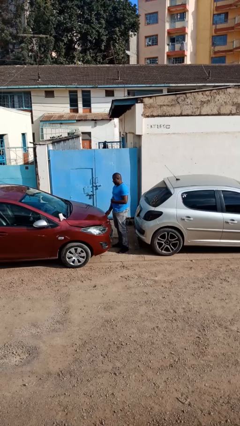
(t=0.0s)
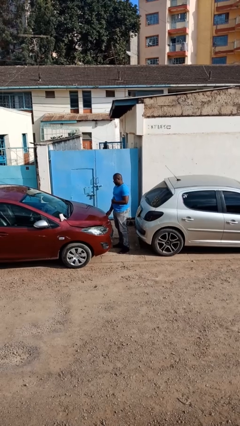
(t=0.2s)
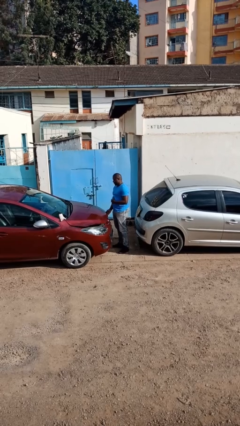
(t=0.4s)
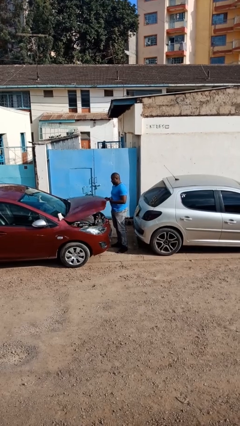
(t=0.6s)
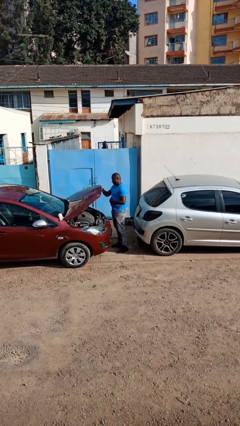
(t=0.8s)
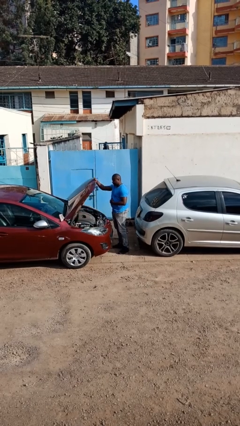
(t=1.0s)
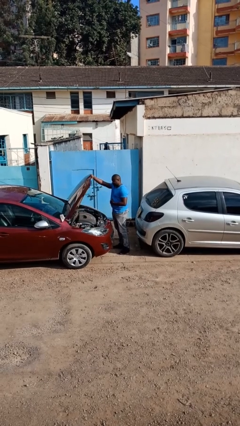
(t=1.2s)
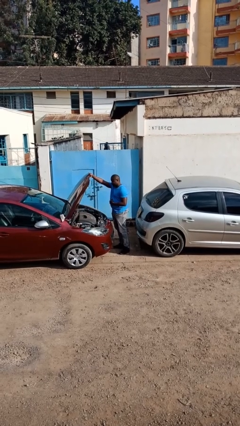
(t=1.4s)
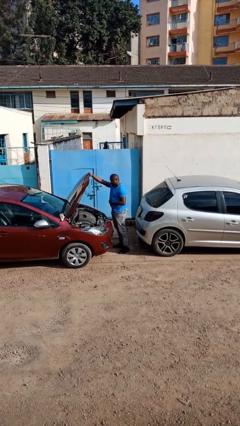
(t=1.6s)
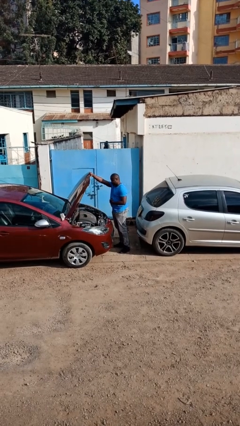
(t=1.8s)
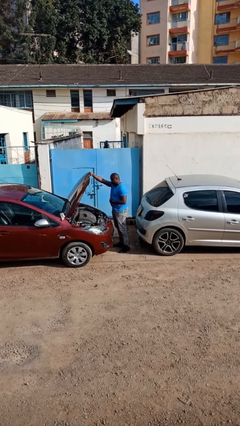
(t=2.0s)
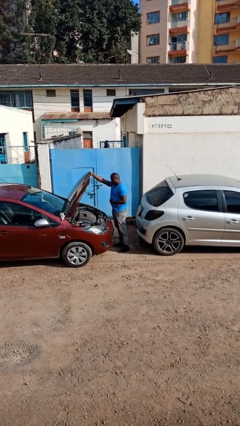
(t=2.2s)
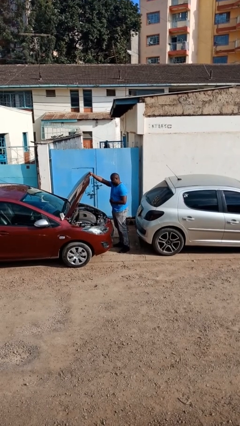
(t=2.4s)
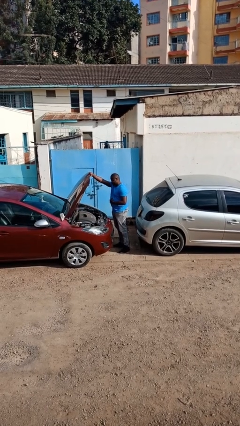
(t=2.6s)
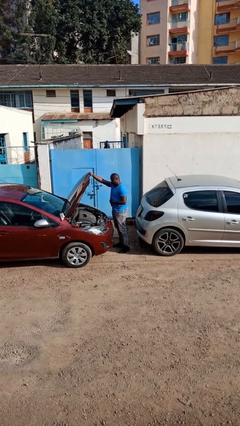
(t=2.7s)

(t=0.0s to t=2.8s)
person opens car hood

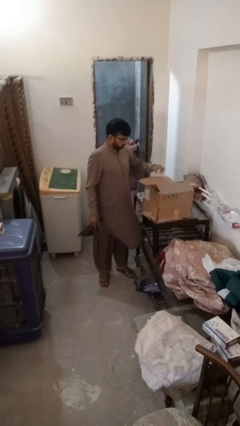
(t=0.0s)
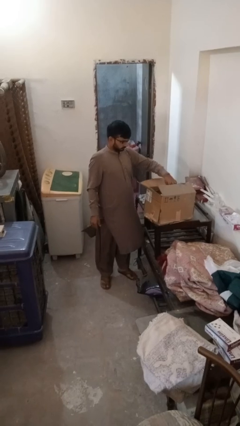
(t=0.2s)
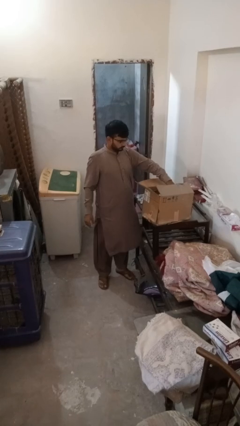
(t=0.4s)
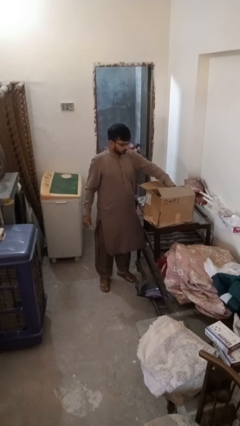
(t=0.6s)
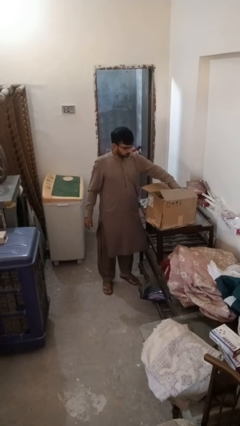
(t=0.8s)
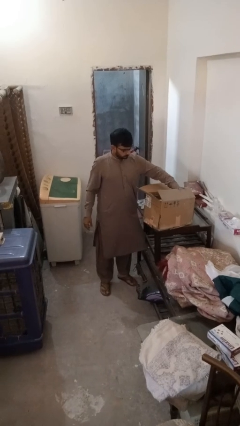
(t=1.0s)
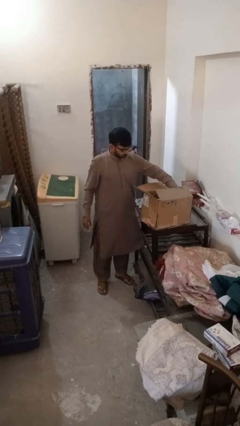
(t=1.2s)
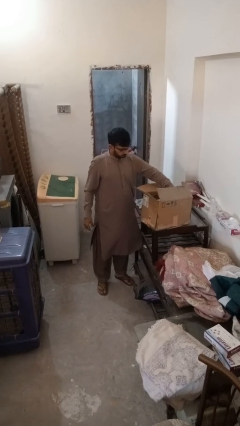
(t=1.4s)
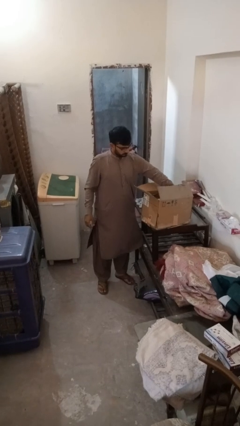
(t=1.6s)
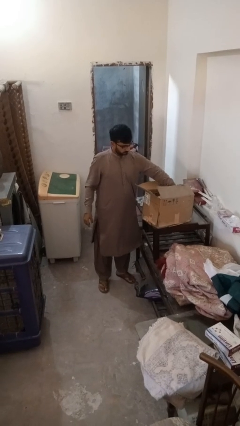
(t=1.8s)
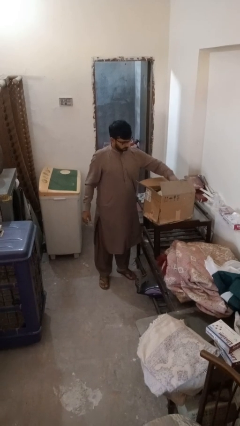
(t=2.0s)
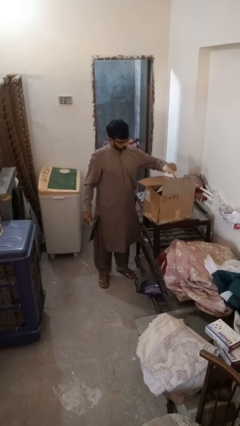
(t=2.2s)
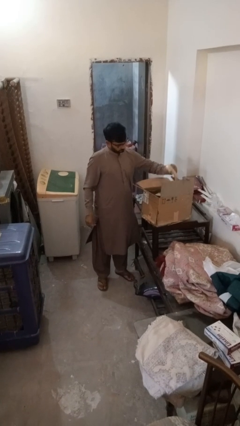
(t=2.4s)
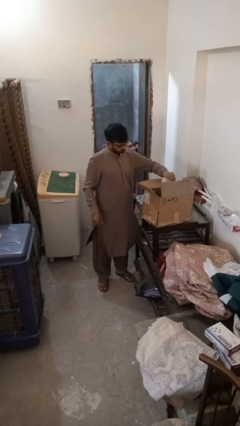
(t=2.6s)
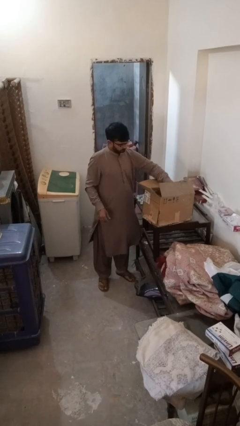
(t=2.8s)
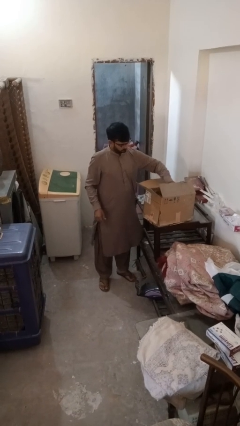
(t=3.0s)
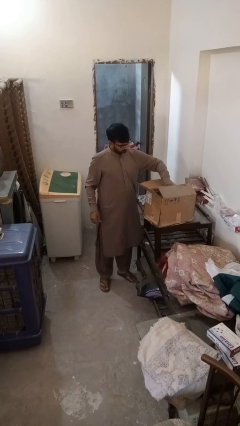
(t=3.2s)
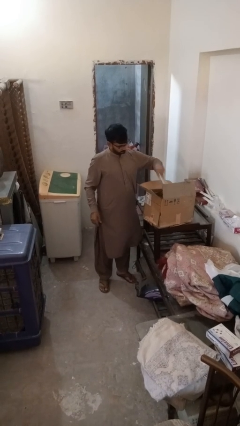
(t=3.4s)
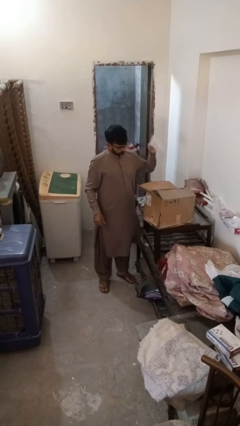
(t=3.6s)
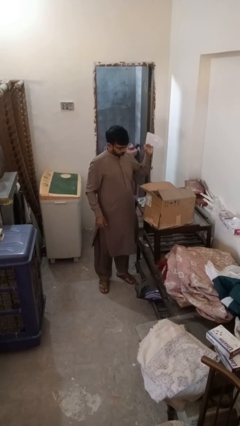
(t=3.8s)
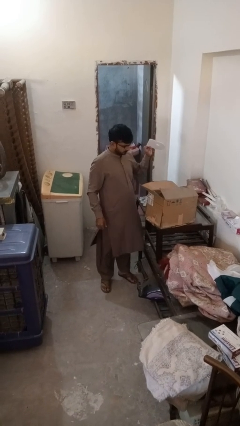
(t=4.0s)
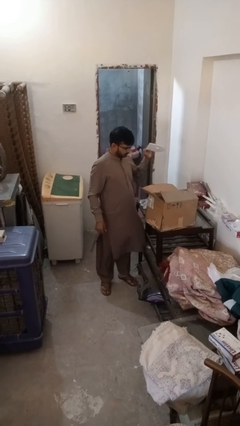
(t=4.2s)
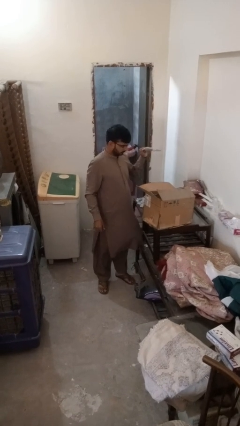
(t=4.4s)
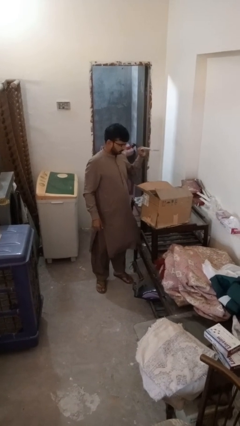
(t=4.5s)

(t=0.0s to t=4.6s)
person takes object from box

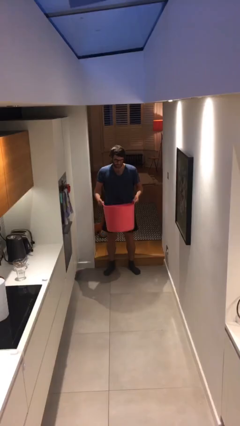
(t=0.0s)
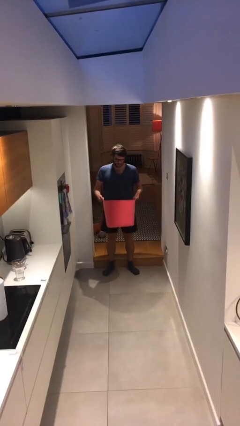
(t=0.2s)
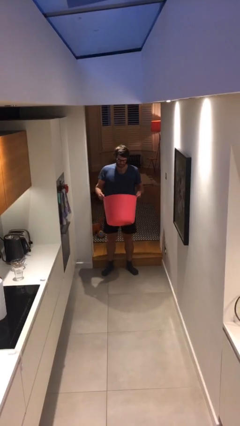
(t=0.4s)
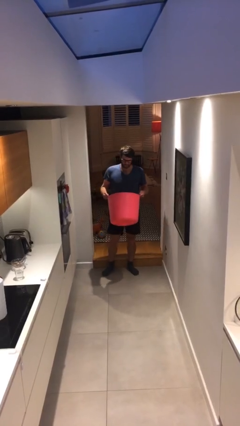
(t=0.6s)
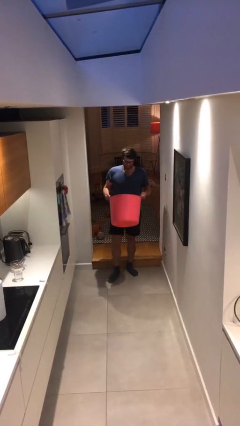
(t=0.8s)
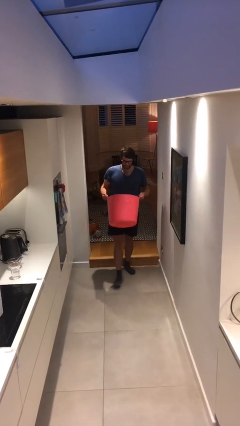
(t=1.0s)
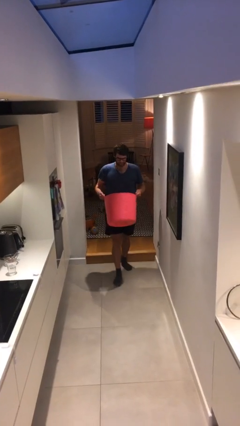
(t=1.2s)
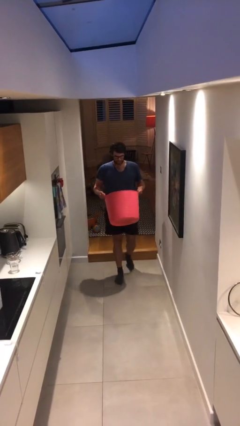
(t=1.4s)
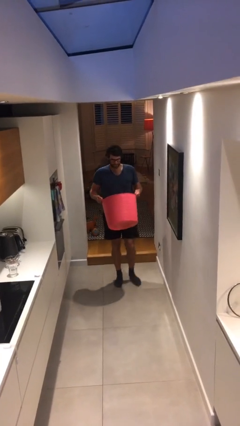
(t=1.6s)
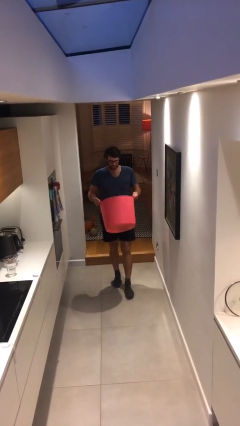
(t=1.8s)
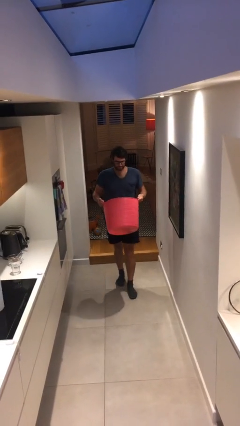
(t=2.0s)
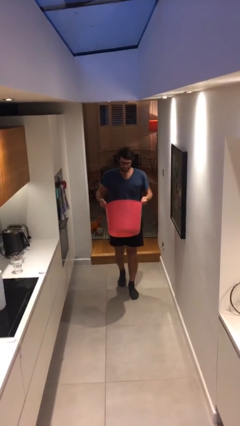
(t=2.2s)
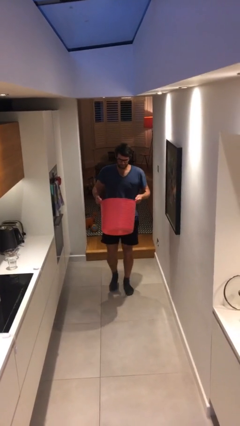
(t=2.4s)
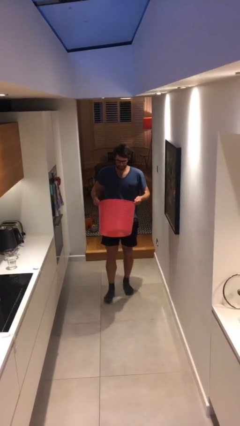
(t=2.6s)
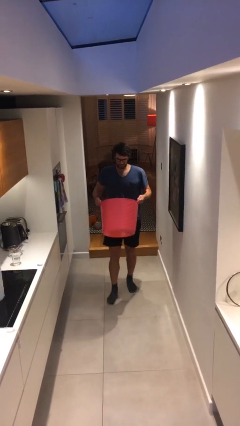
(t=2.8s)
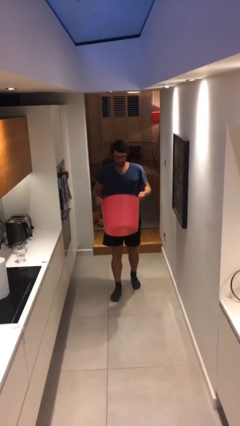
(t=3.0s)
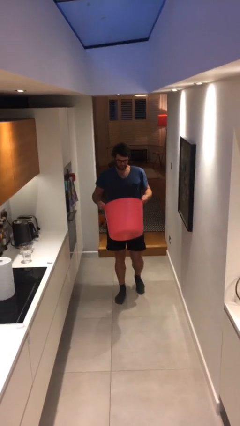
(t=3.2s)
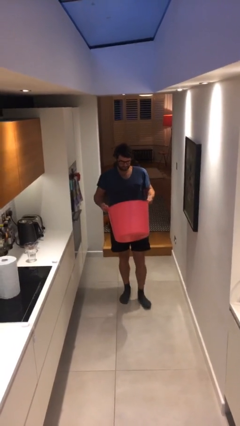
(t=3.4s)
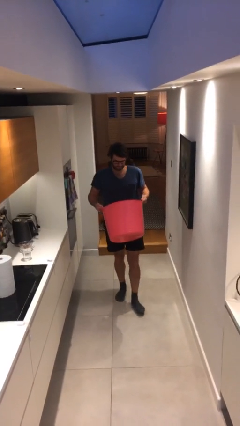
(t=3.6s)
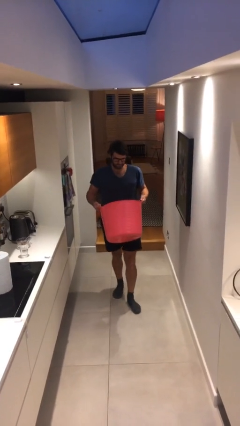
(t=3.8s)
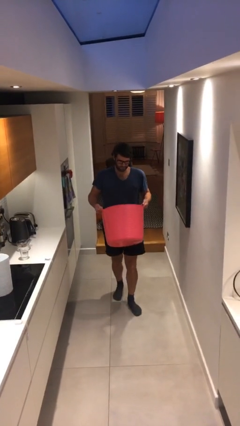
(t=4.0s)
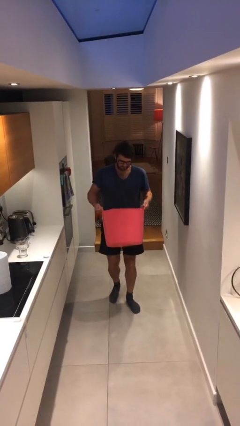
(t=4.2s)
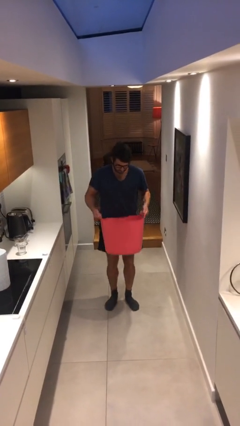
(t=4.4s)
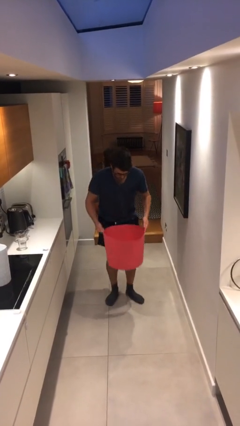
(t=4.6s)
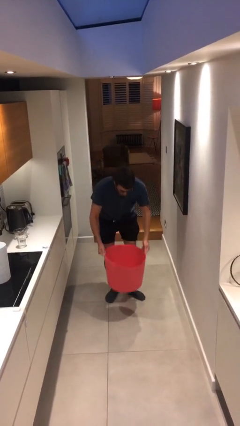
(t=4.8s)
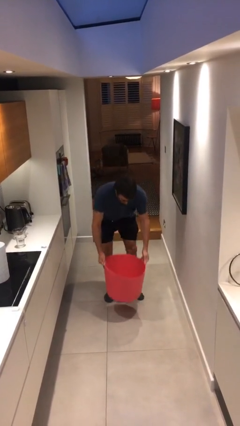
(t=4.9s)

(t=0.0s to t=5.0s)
person carries heavy object

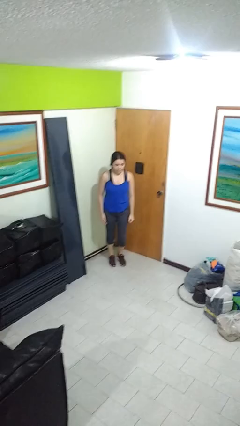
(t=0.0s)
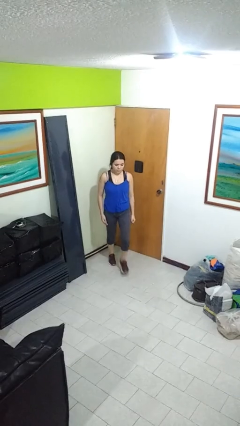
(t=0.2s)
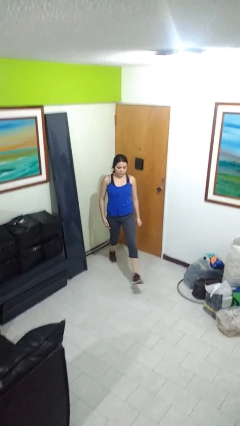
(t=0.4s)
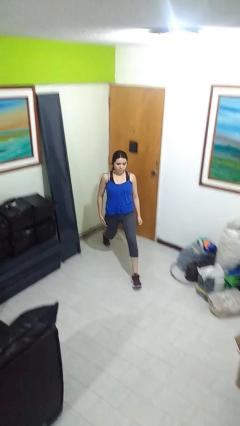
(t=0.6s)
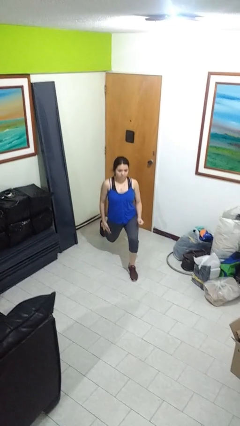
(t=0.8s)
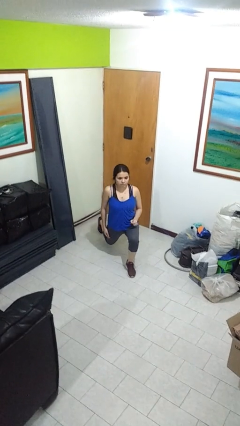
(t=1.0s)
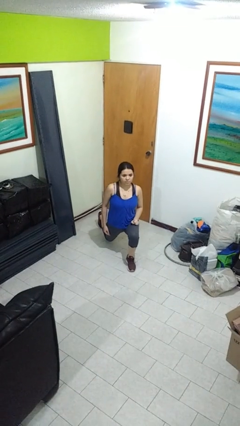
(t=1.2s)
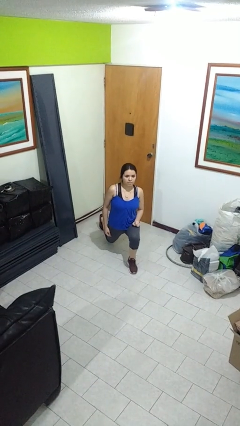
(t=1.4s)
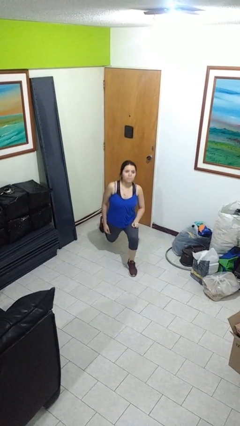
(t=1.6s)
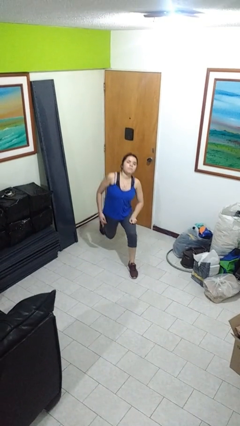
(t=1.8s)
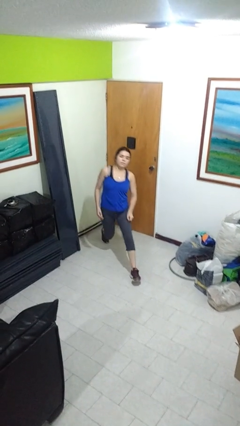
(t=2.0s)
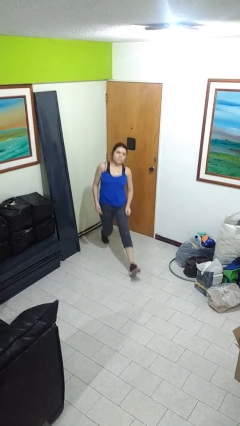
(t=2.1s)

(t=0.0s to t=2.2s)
person exercises with lunges

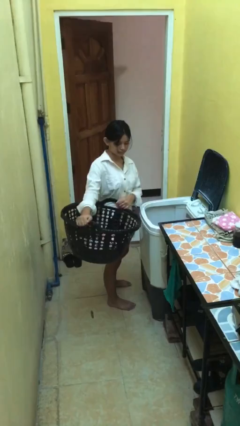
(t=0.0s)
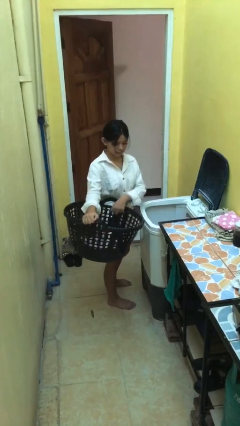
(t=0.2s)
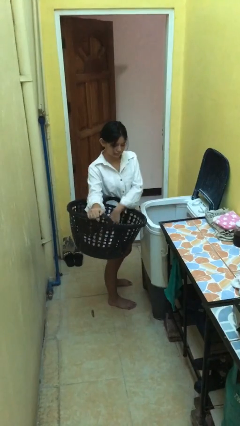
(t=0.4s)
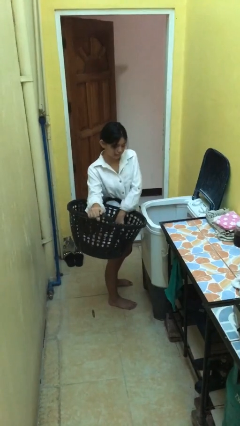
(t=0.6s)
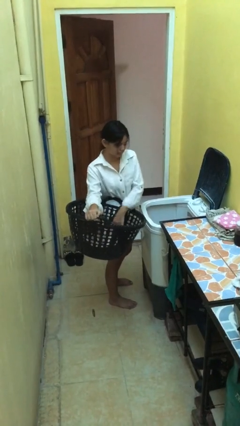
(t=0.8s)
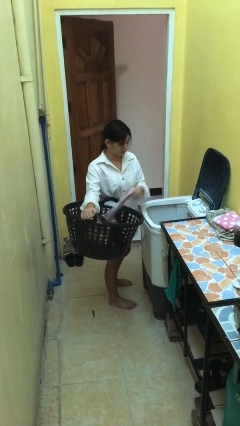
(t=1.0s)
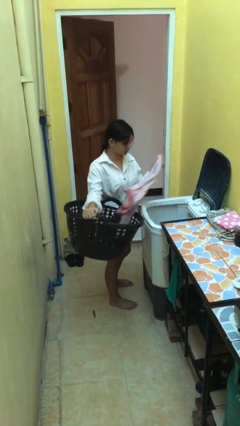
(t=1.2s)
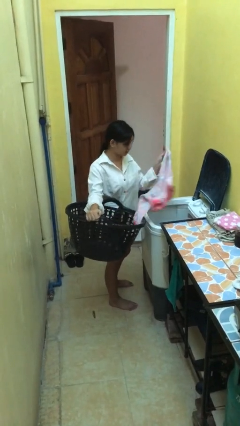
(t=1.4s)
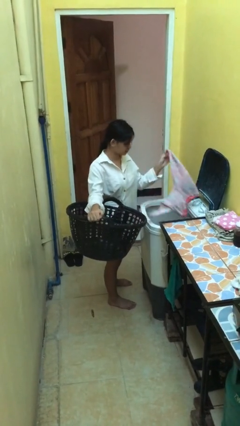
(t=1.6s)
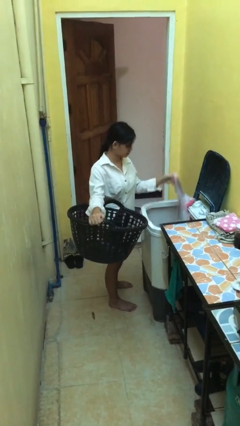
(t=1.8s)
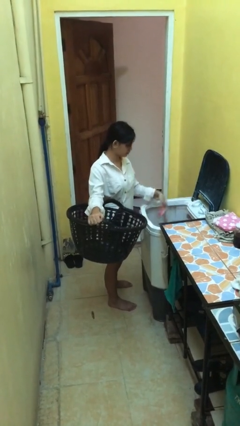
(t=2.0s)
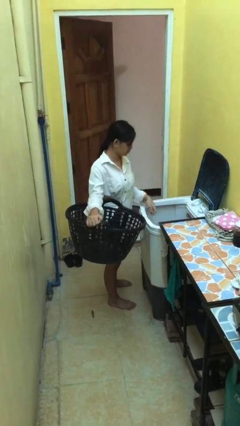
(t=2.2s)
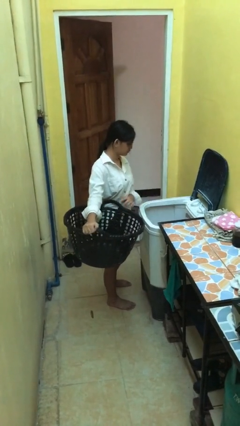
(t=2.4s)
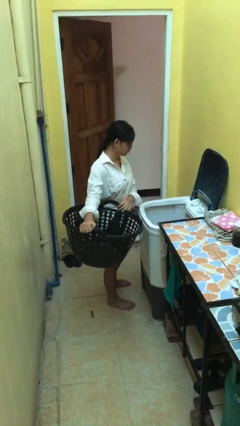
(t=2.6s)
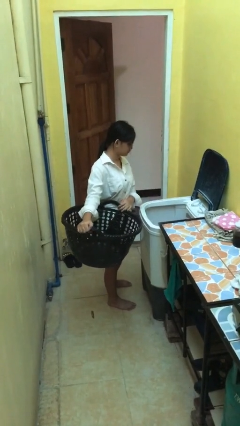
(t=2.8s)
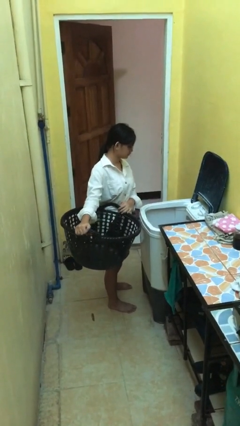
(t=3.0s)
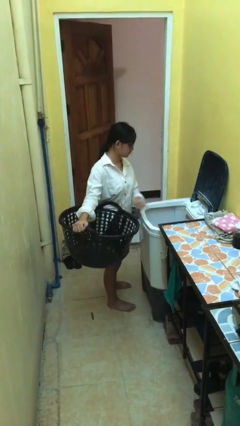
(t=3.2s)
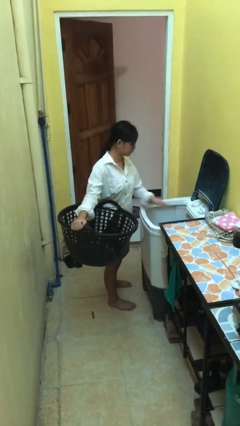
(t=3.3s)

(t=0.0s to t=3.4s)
person loads clotheswasher
